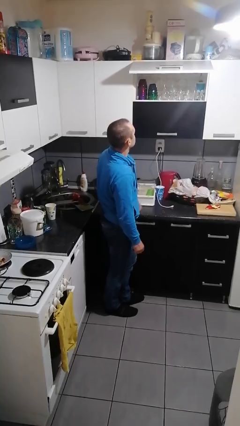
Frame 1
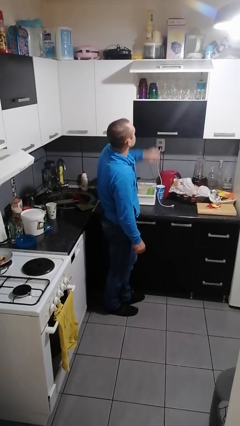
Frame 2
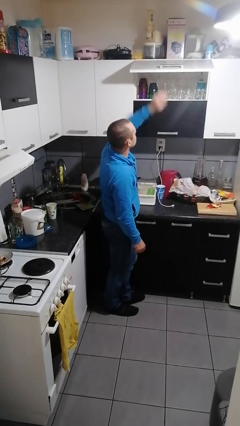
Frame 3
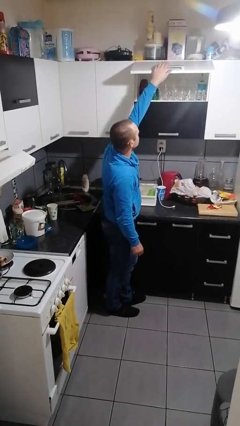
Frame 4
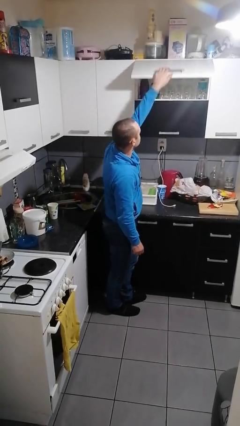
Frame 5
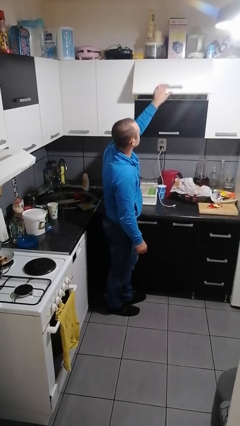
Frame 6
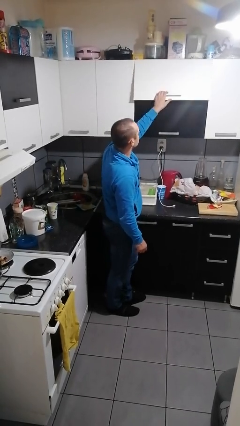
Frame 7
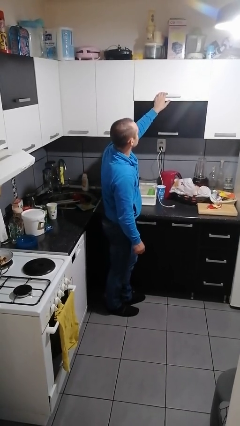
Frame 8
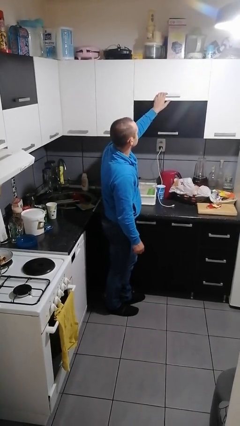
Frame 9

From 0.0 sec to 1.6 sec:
person closes cabinet

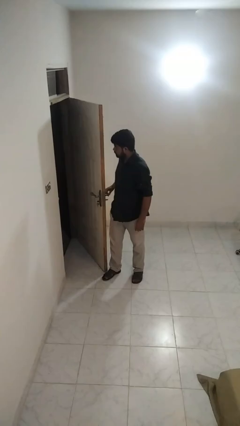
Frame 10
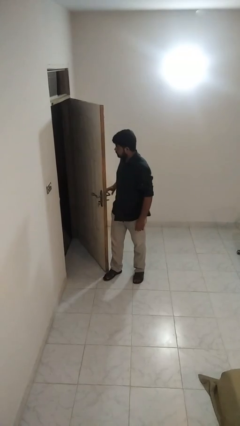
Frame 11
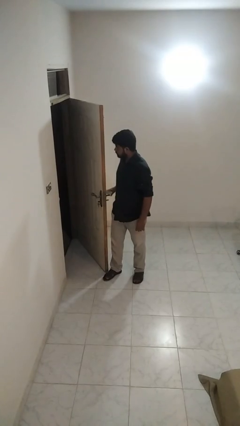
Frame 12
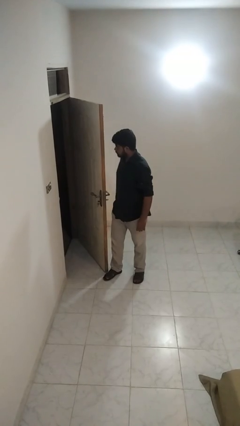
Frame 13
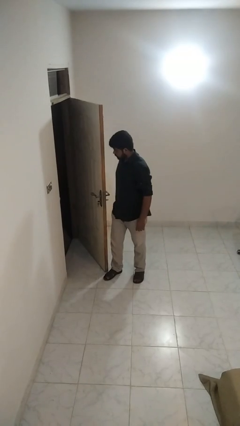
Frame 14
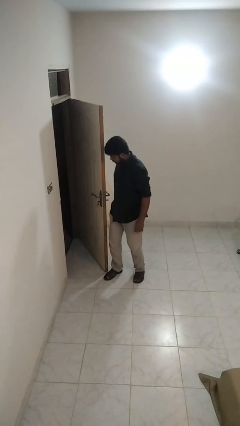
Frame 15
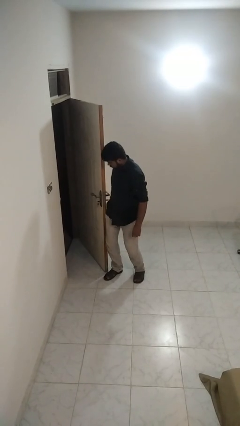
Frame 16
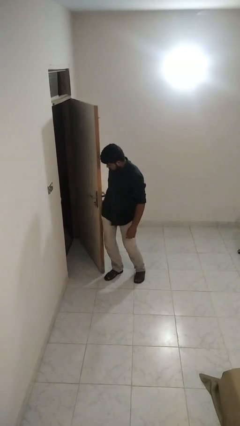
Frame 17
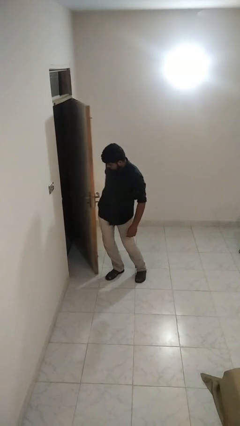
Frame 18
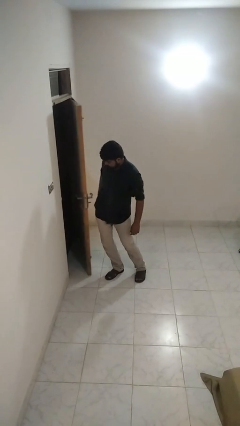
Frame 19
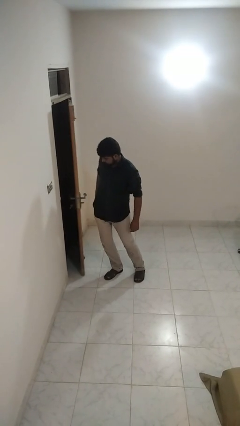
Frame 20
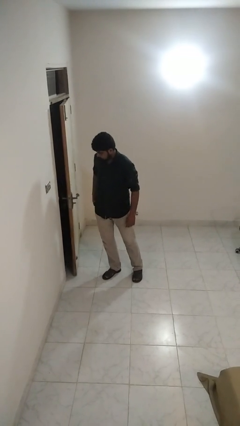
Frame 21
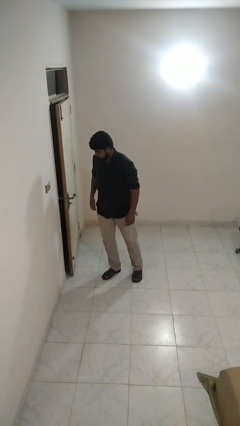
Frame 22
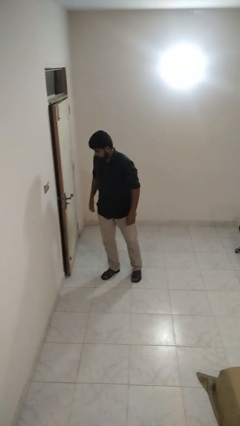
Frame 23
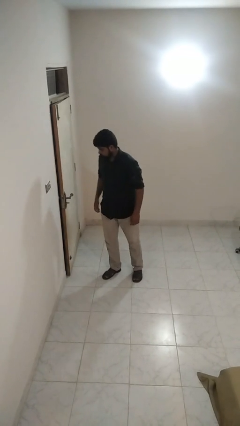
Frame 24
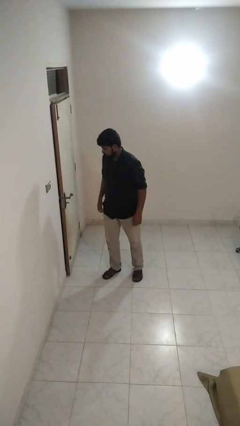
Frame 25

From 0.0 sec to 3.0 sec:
person closes door with hip

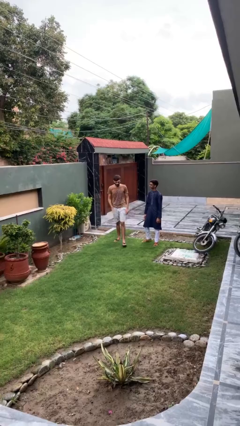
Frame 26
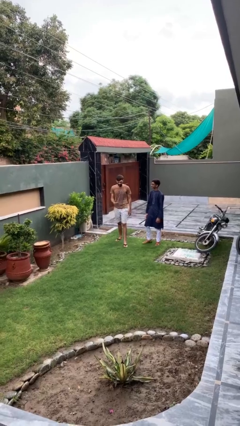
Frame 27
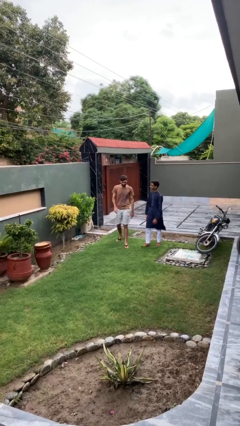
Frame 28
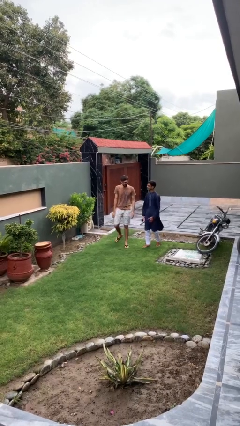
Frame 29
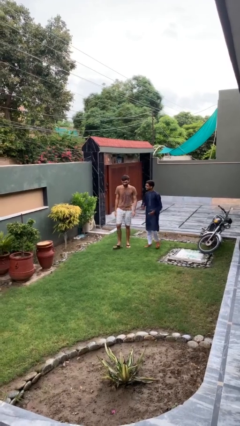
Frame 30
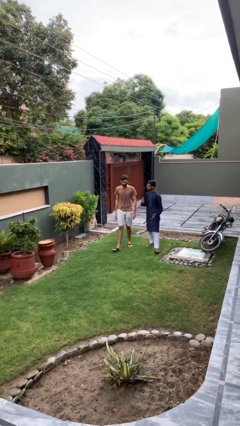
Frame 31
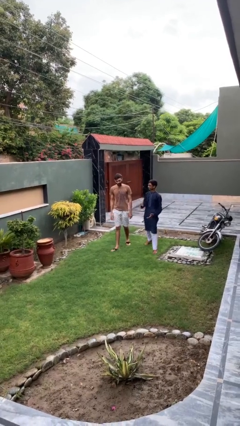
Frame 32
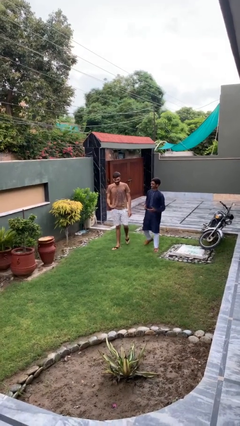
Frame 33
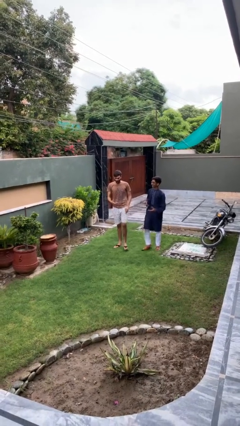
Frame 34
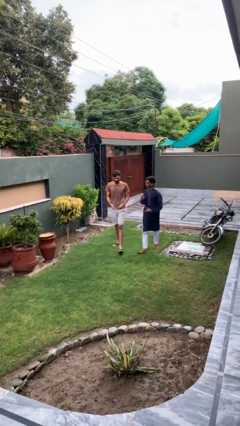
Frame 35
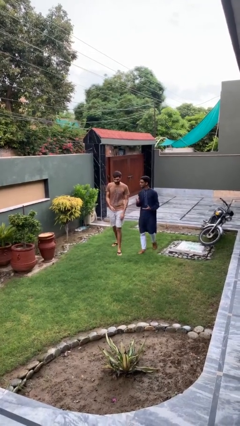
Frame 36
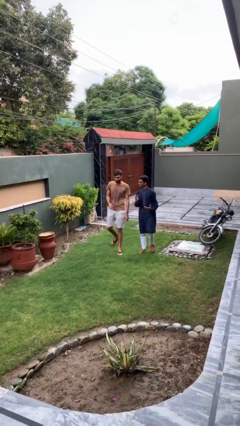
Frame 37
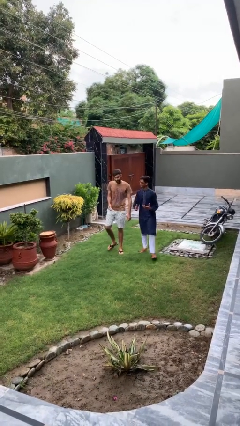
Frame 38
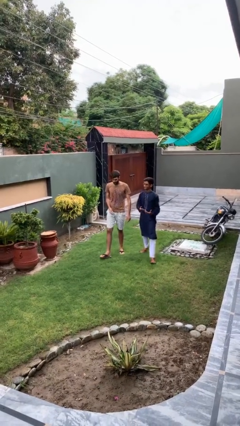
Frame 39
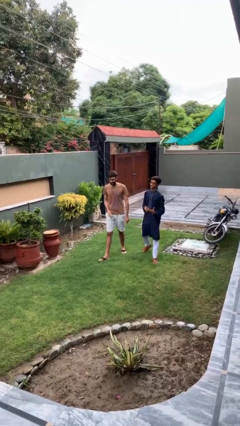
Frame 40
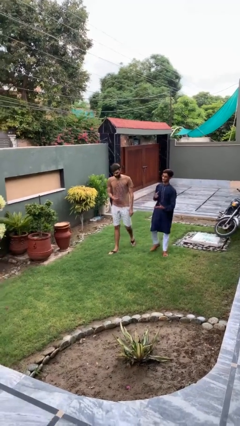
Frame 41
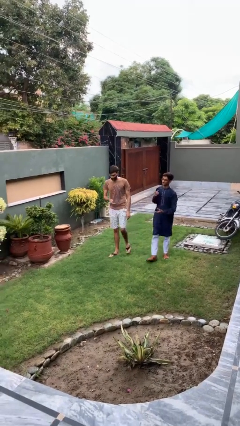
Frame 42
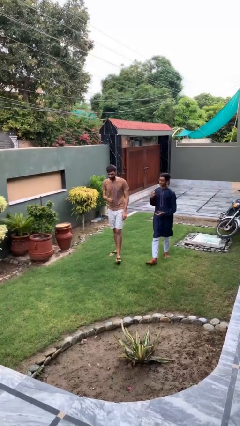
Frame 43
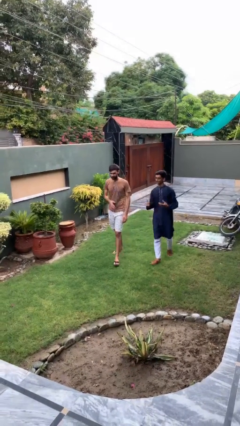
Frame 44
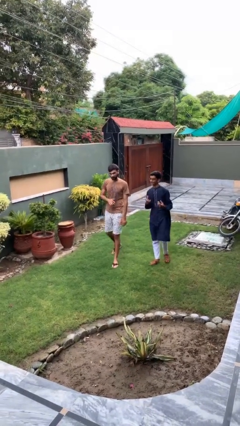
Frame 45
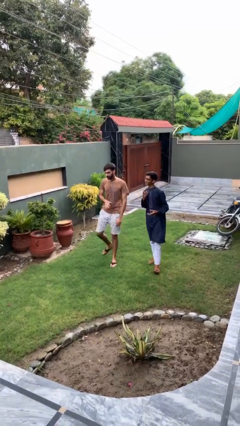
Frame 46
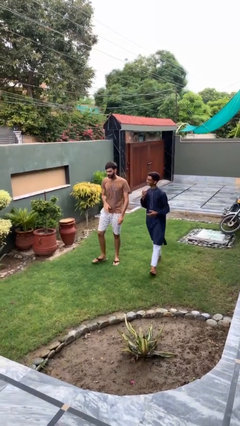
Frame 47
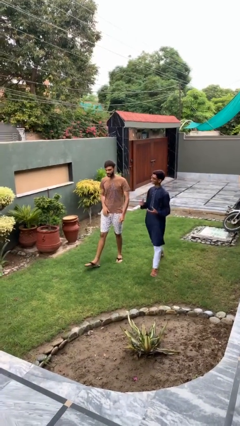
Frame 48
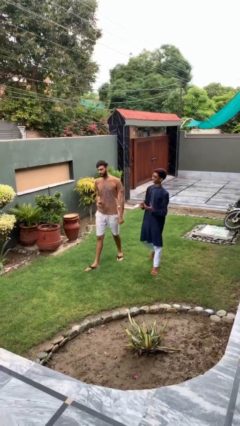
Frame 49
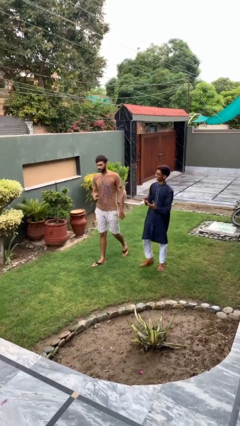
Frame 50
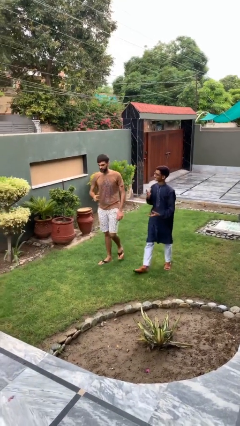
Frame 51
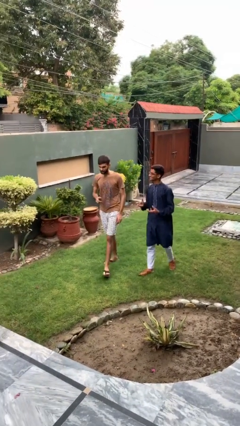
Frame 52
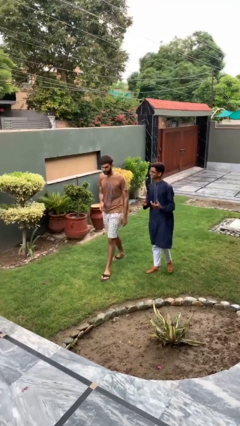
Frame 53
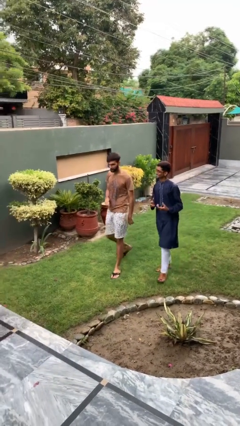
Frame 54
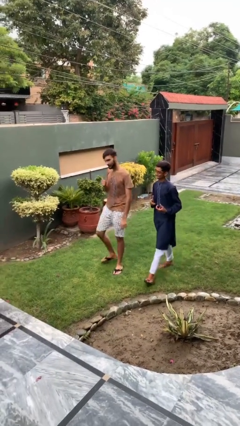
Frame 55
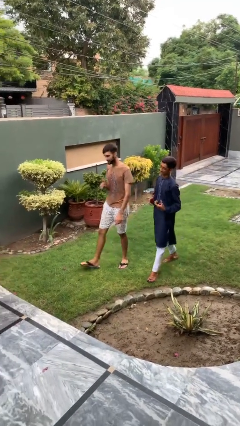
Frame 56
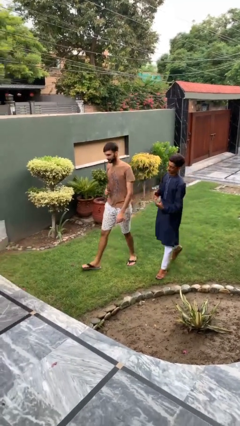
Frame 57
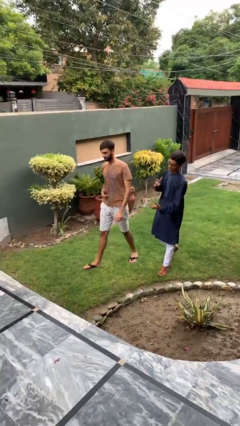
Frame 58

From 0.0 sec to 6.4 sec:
person talks to person

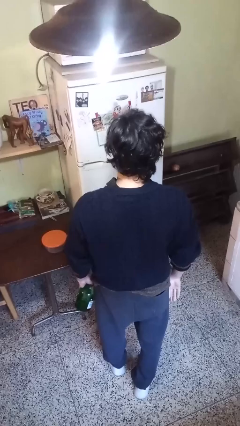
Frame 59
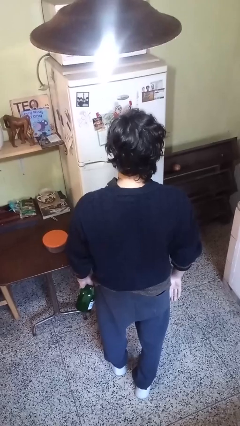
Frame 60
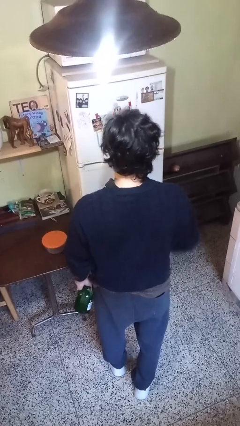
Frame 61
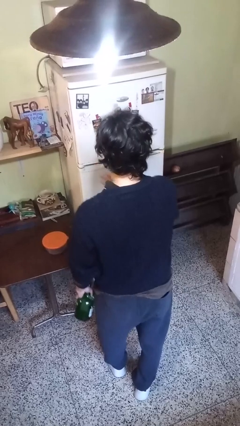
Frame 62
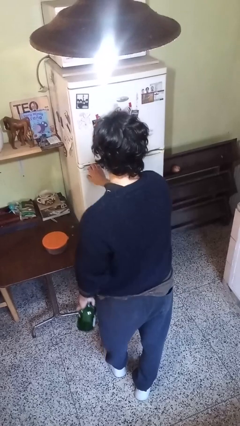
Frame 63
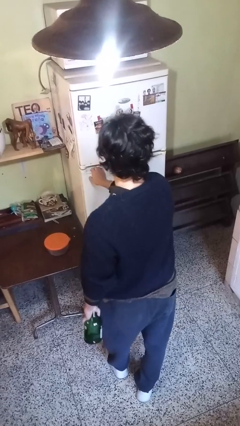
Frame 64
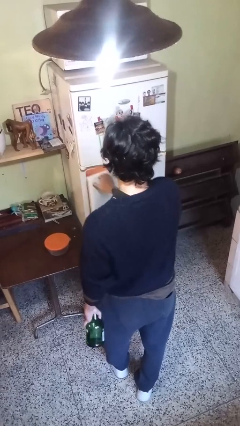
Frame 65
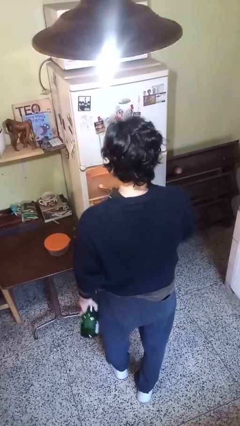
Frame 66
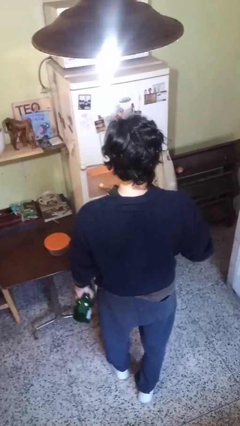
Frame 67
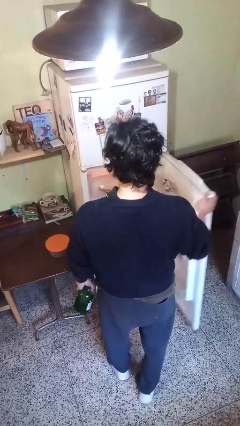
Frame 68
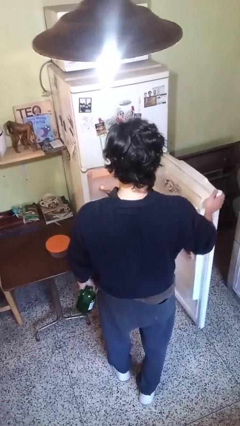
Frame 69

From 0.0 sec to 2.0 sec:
person opens refrigerator

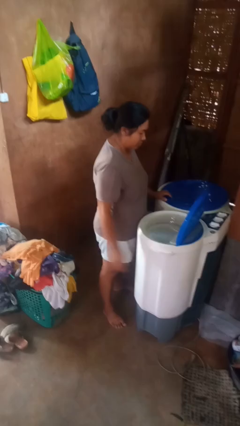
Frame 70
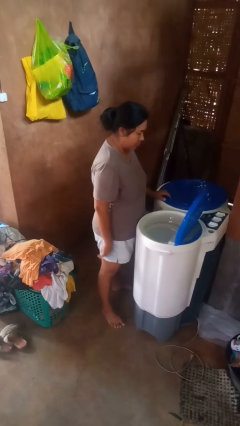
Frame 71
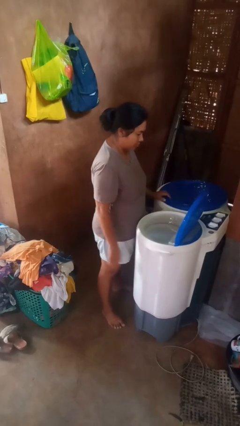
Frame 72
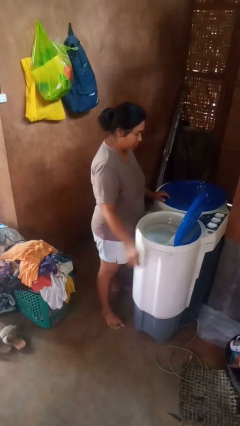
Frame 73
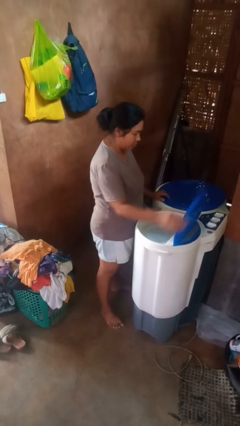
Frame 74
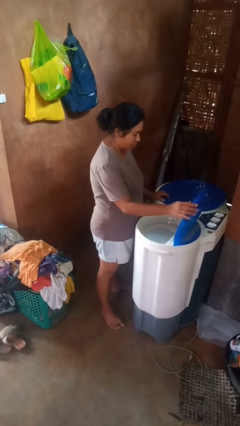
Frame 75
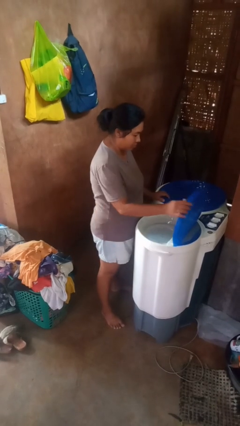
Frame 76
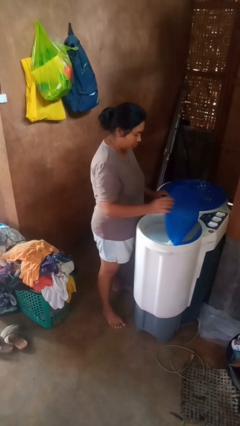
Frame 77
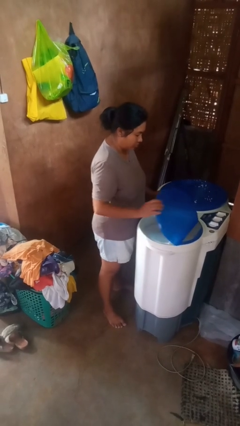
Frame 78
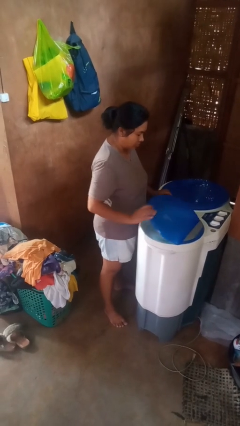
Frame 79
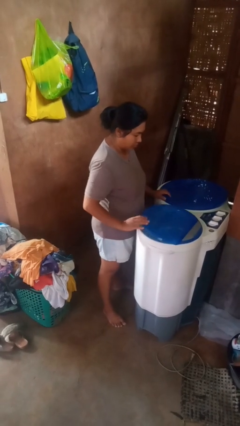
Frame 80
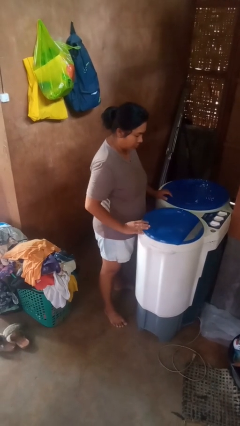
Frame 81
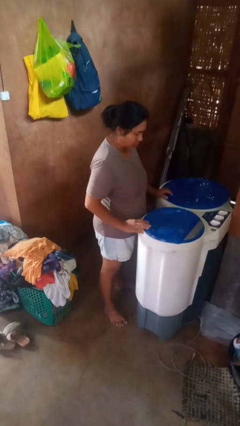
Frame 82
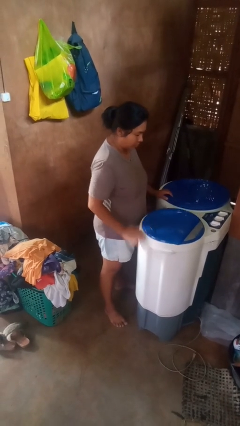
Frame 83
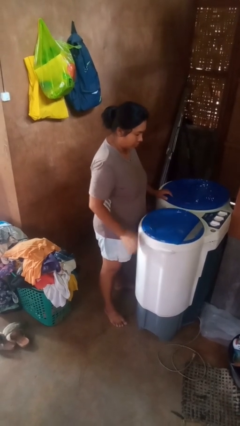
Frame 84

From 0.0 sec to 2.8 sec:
person closes clothes washer

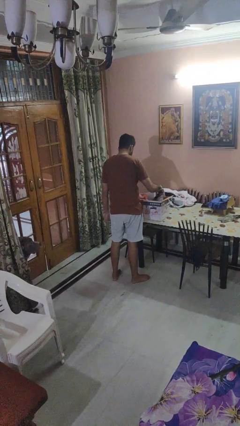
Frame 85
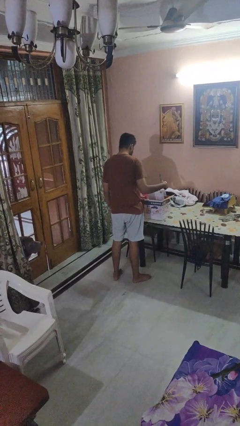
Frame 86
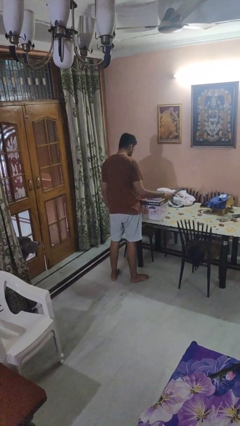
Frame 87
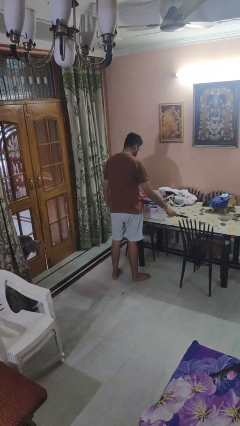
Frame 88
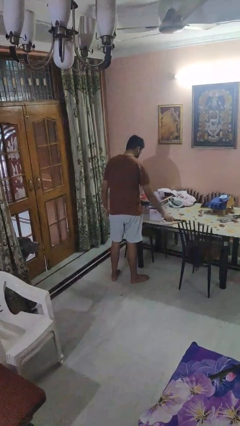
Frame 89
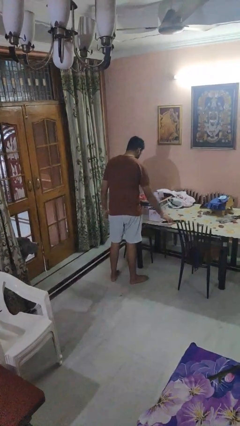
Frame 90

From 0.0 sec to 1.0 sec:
person takes object from box

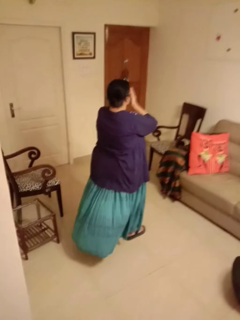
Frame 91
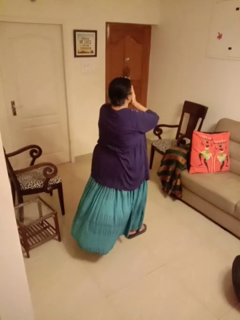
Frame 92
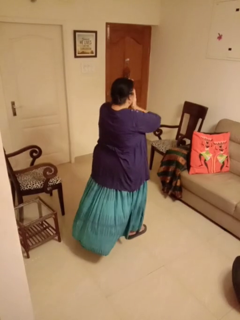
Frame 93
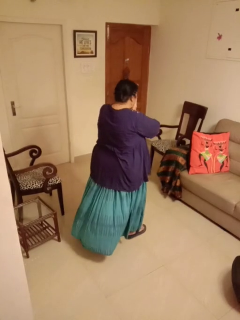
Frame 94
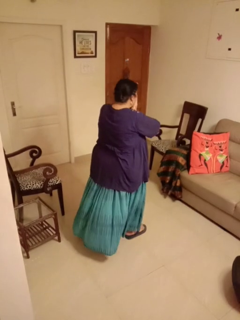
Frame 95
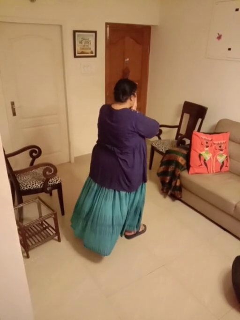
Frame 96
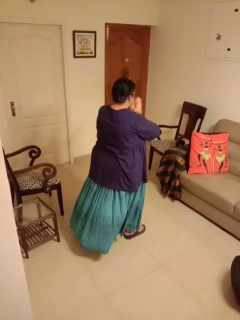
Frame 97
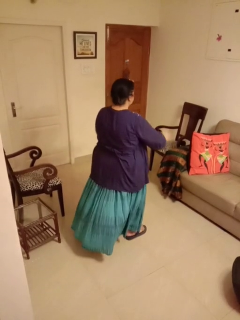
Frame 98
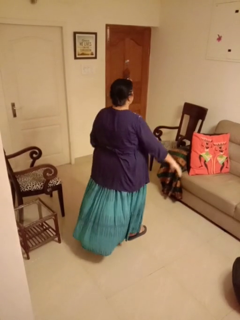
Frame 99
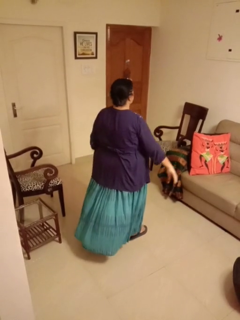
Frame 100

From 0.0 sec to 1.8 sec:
person sneezes into hand
